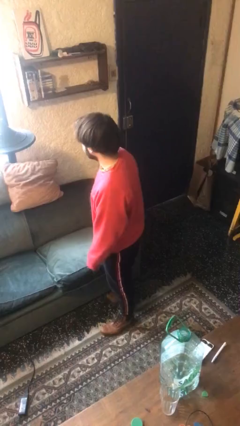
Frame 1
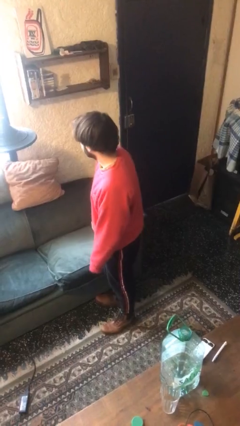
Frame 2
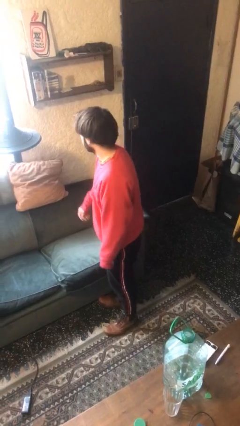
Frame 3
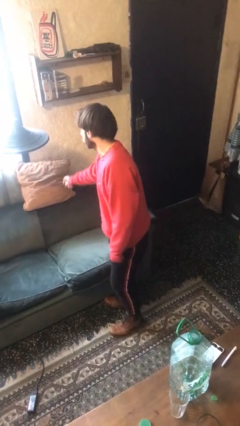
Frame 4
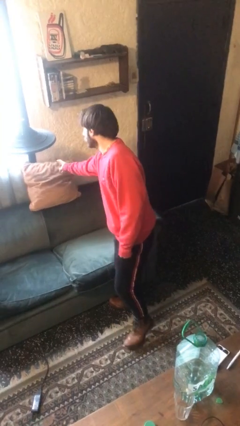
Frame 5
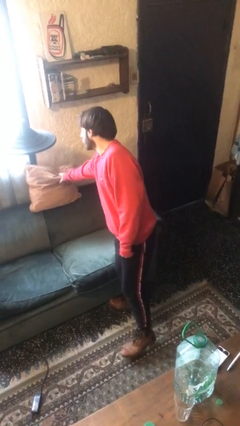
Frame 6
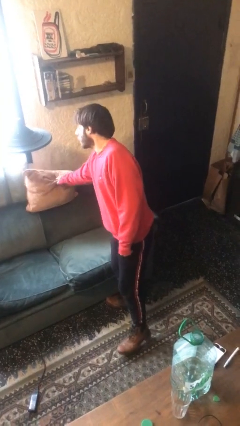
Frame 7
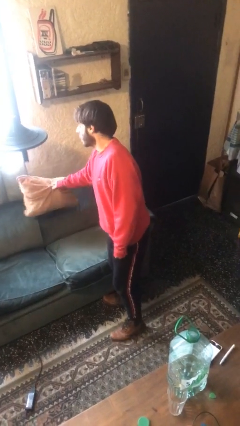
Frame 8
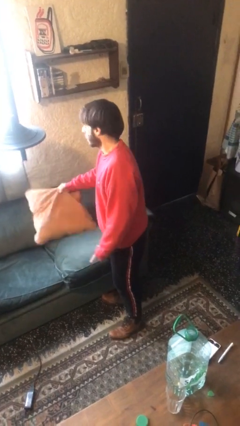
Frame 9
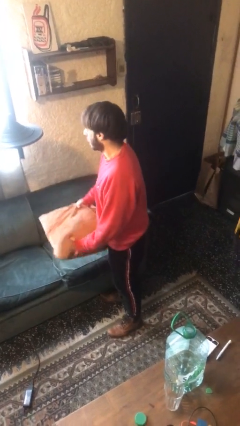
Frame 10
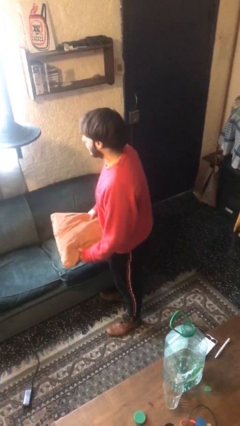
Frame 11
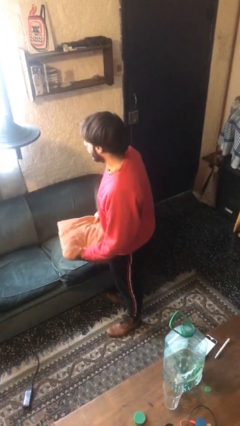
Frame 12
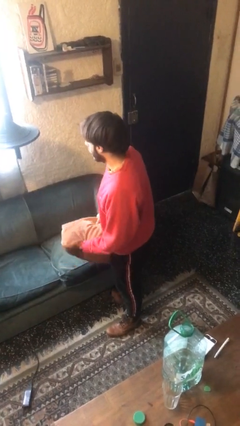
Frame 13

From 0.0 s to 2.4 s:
person picks up object from couch

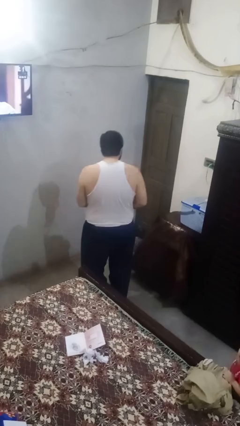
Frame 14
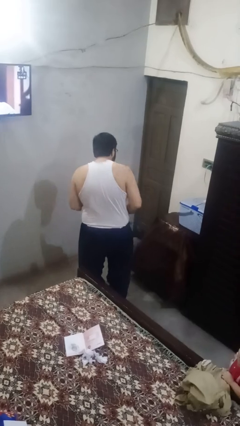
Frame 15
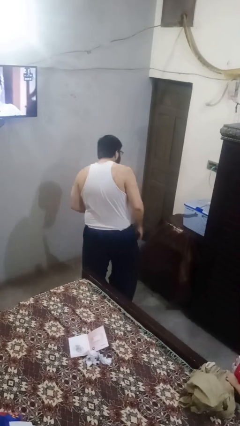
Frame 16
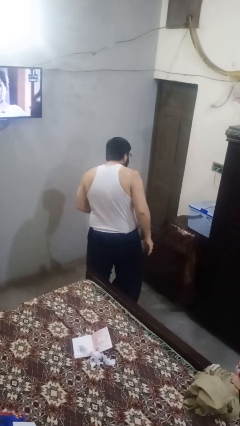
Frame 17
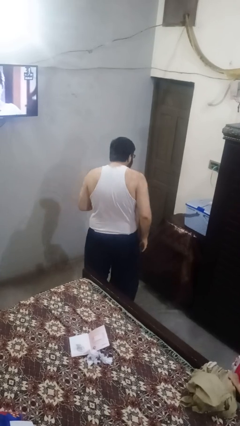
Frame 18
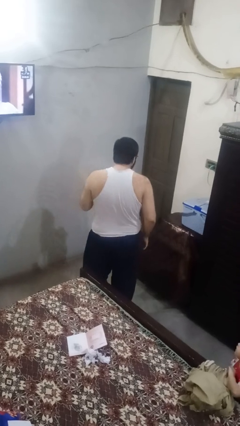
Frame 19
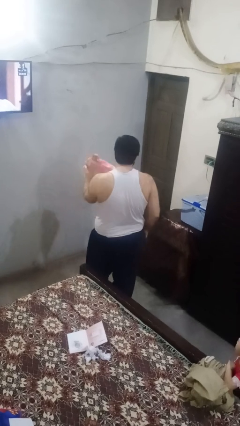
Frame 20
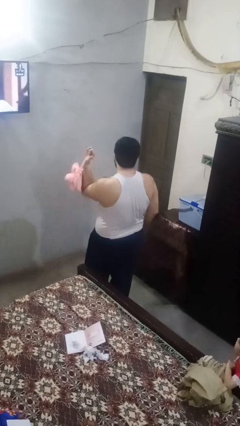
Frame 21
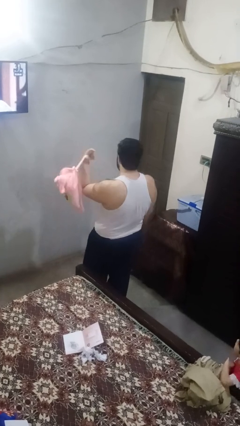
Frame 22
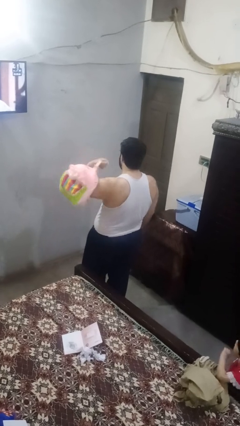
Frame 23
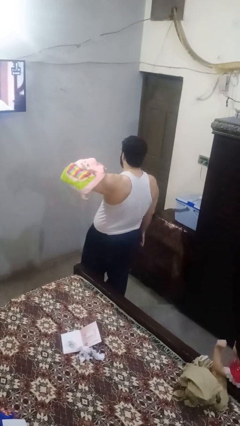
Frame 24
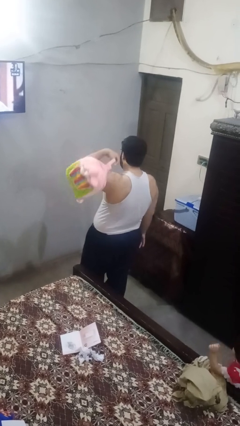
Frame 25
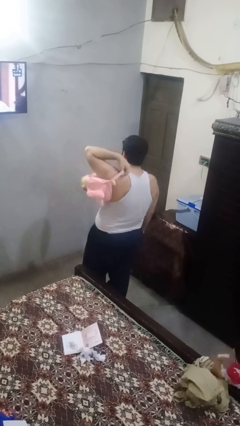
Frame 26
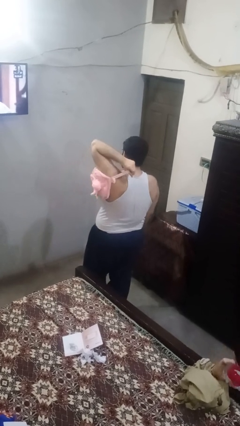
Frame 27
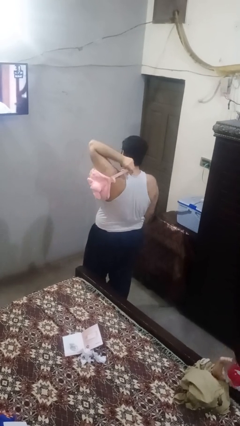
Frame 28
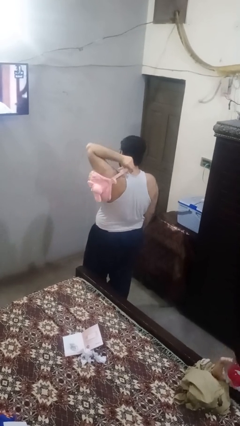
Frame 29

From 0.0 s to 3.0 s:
person puts on backpack

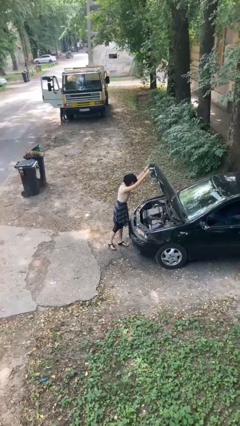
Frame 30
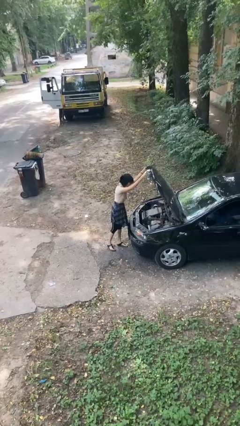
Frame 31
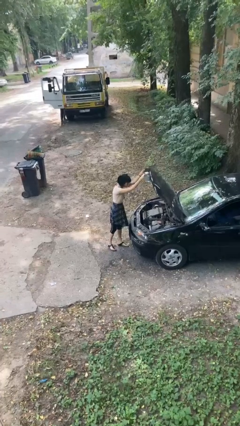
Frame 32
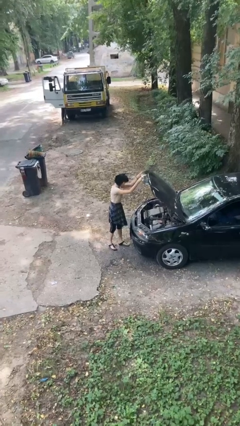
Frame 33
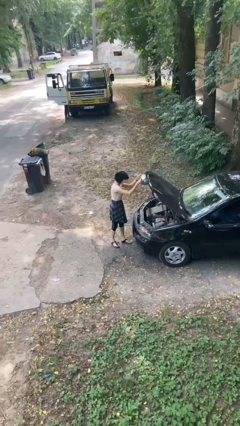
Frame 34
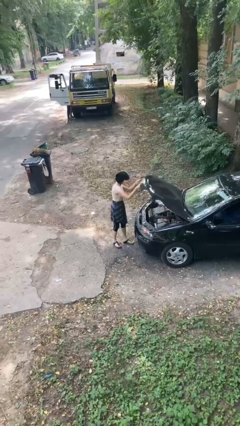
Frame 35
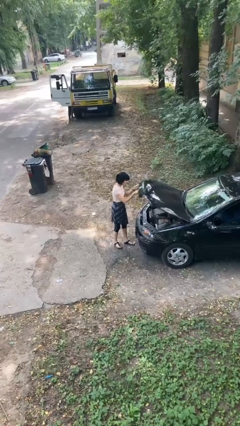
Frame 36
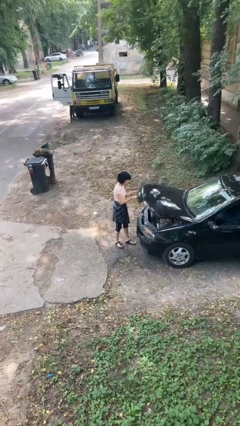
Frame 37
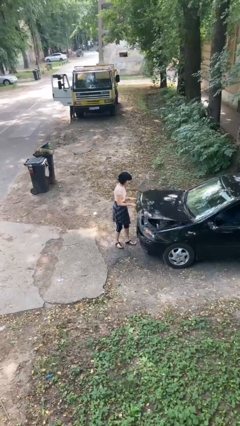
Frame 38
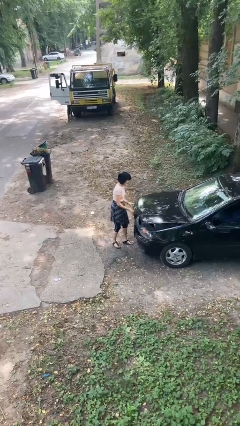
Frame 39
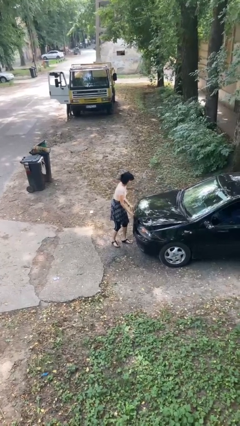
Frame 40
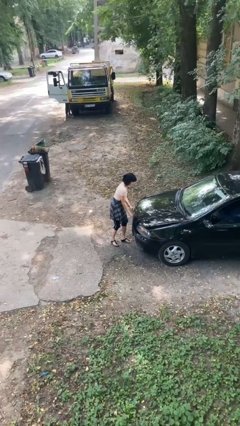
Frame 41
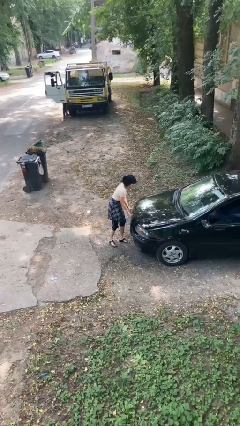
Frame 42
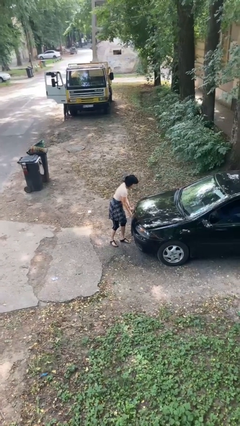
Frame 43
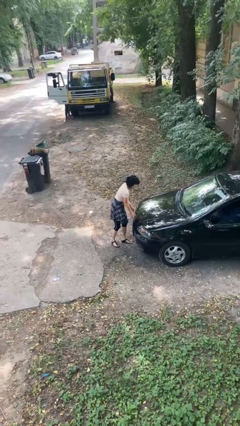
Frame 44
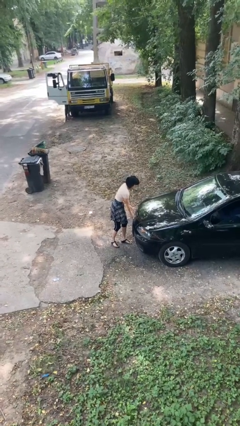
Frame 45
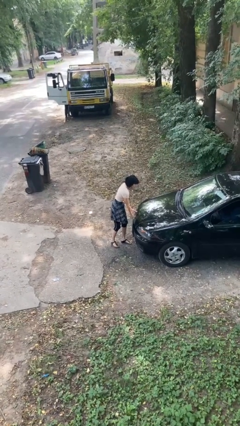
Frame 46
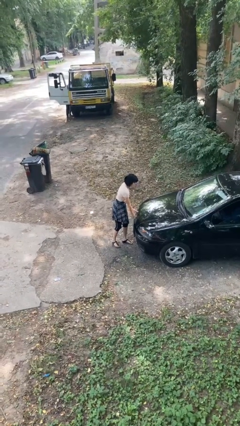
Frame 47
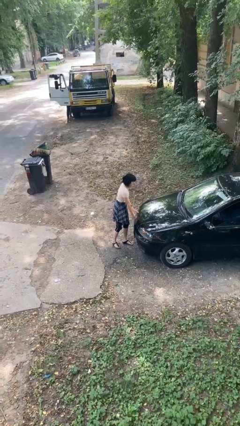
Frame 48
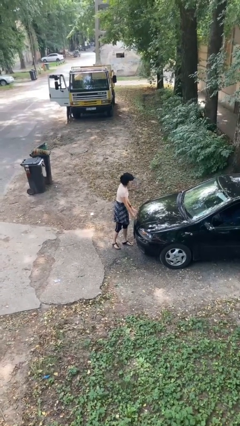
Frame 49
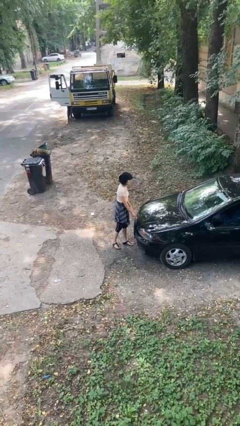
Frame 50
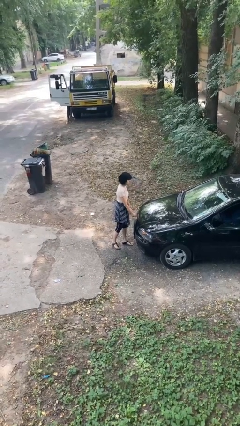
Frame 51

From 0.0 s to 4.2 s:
person closes car hood

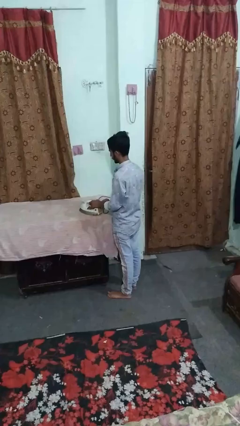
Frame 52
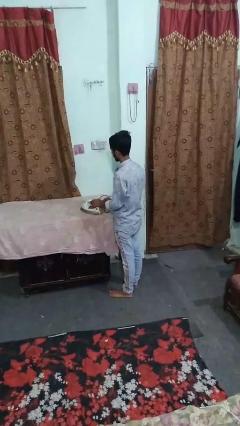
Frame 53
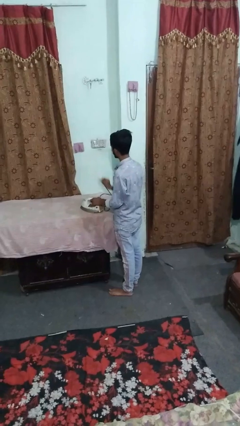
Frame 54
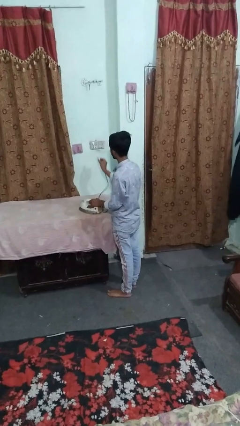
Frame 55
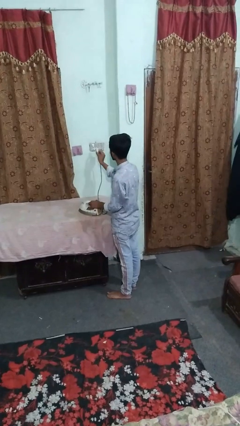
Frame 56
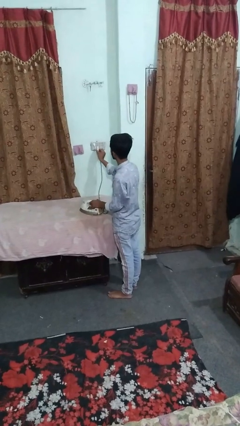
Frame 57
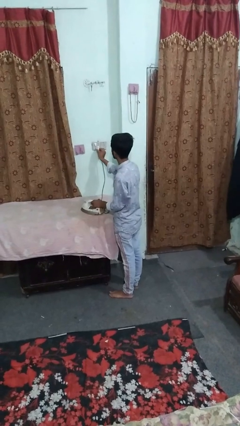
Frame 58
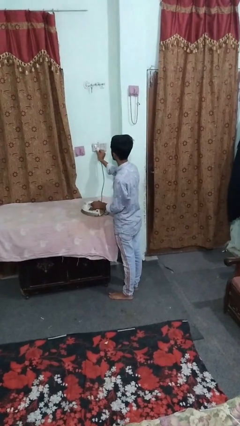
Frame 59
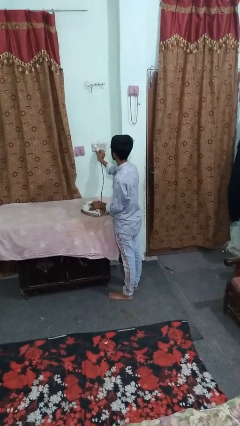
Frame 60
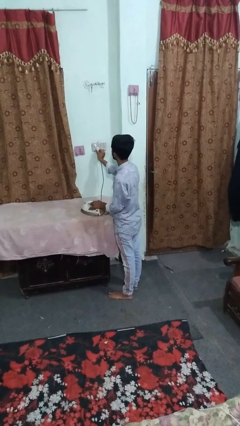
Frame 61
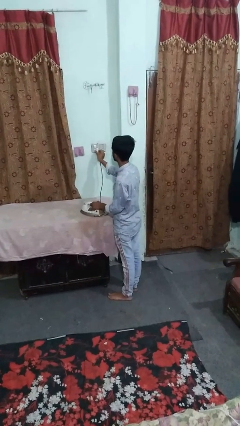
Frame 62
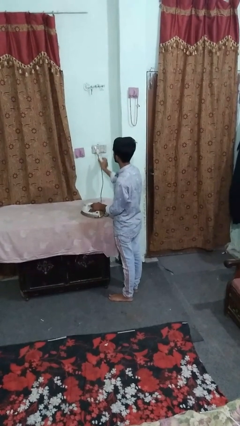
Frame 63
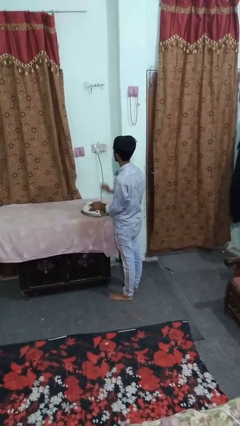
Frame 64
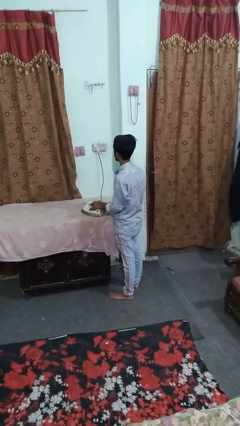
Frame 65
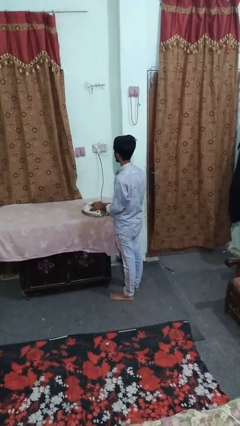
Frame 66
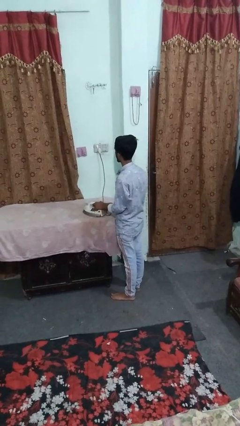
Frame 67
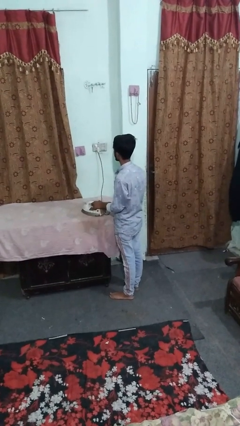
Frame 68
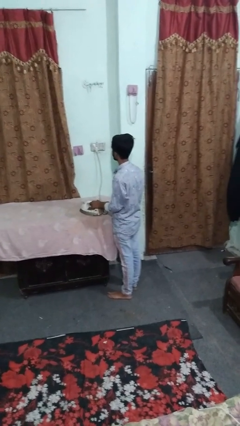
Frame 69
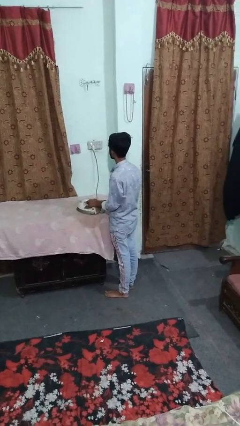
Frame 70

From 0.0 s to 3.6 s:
person plugs into electrical socket

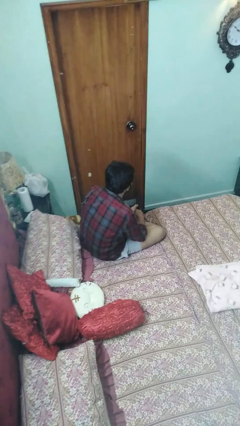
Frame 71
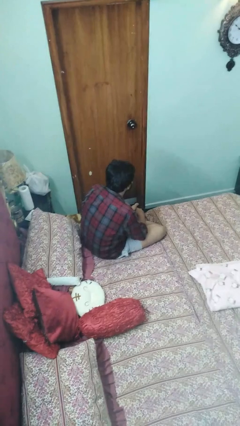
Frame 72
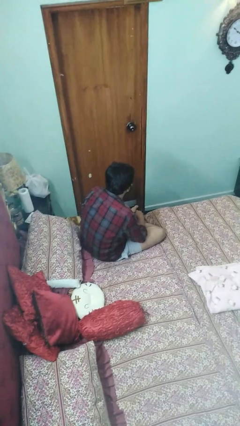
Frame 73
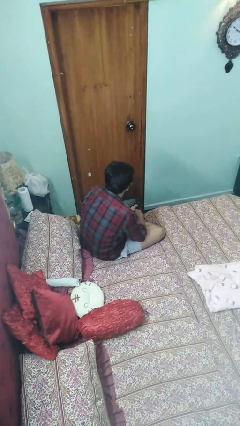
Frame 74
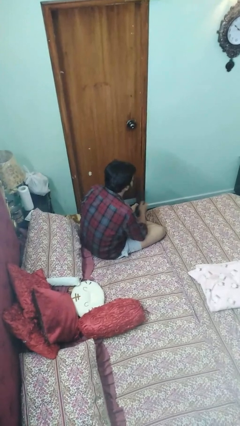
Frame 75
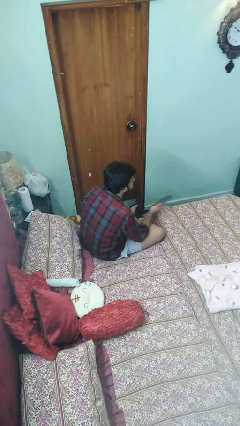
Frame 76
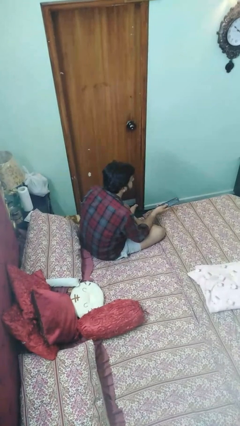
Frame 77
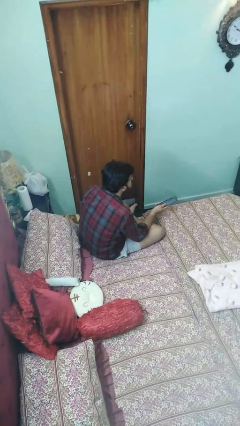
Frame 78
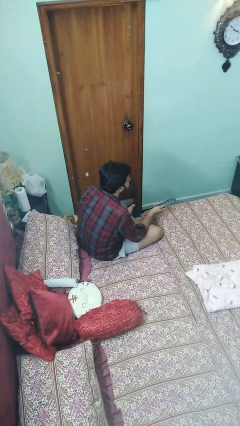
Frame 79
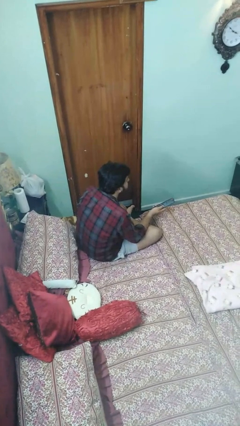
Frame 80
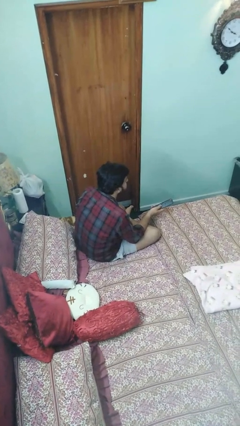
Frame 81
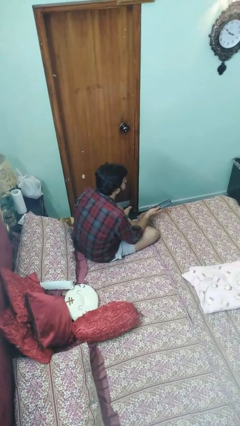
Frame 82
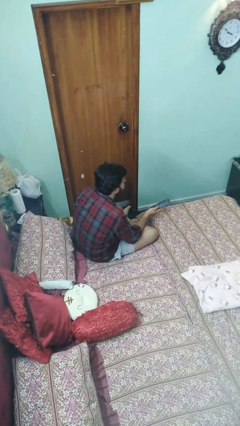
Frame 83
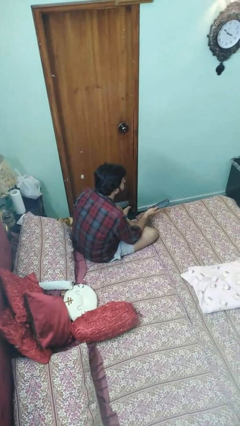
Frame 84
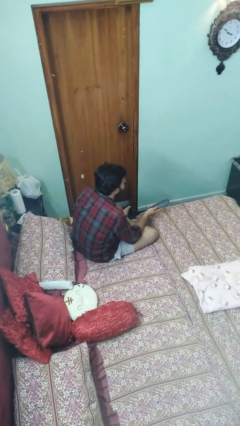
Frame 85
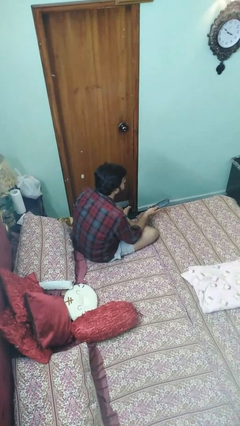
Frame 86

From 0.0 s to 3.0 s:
person uses television remote

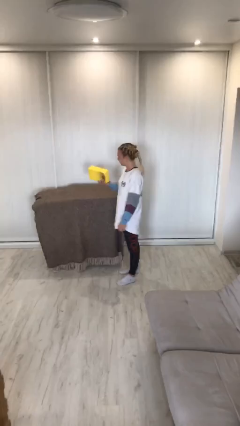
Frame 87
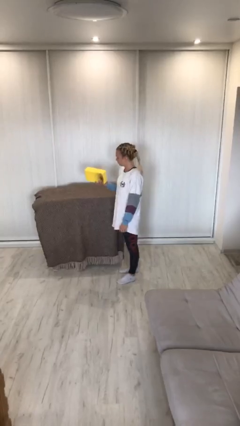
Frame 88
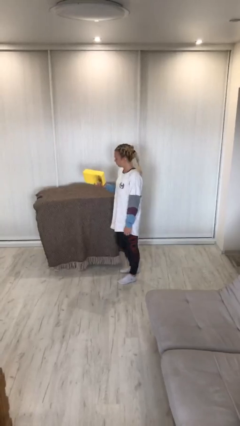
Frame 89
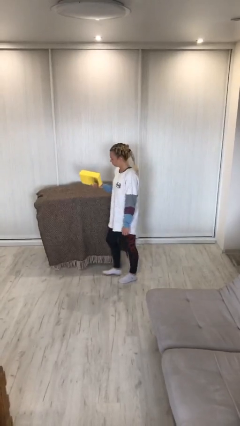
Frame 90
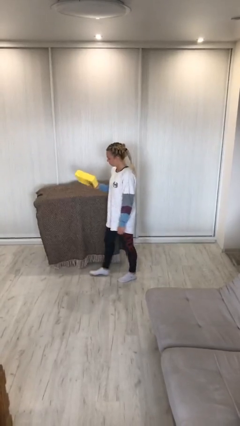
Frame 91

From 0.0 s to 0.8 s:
person picks up object from table

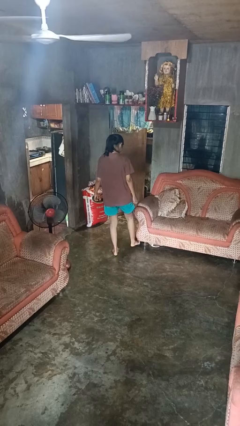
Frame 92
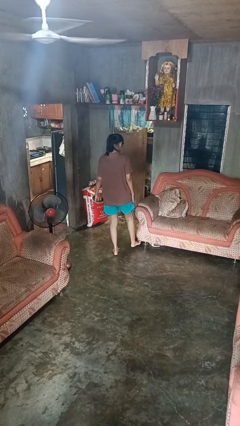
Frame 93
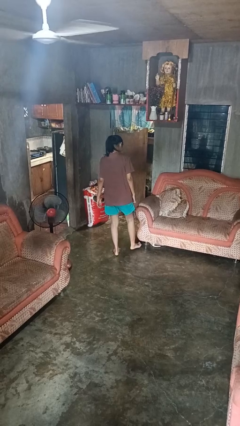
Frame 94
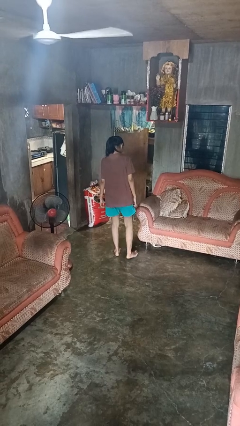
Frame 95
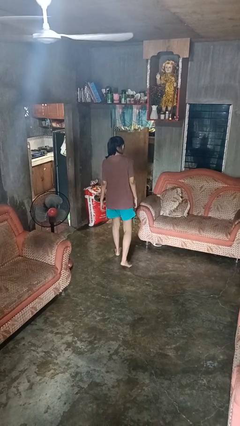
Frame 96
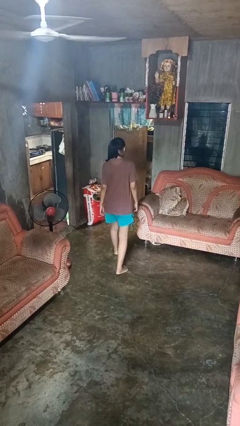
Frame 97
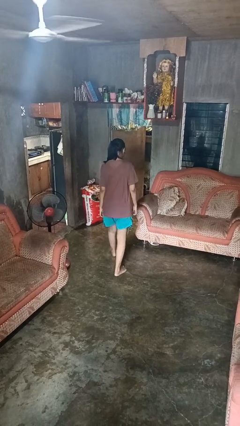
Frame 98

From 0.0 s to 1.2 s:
person stubs toe
